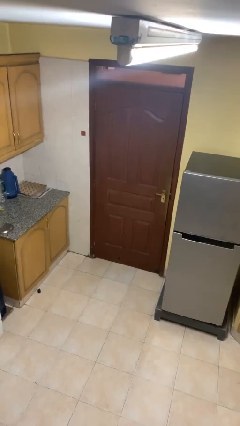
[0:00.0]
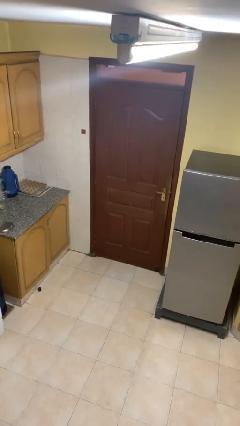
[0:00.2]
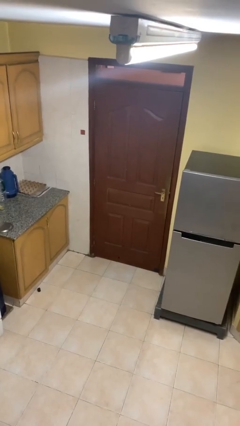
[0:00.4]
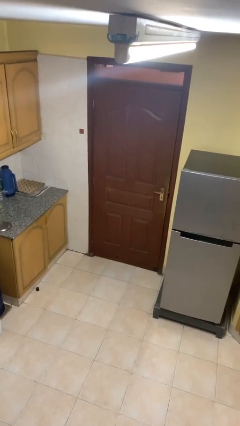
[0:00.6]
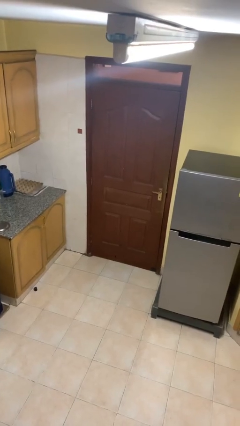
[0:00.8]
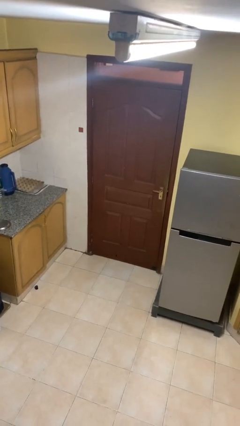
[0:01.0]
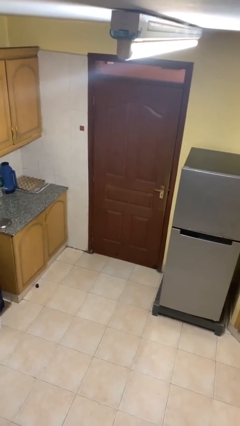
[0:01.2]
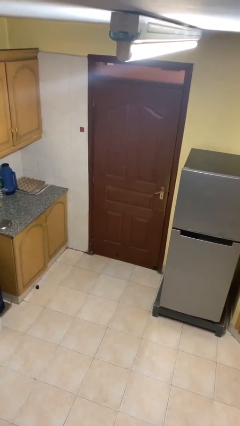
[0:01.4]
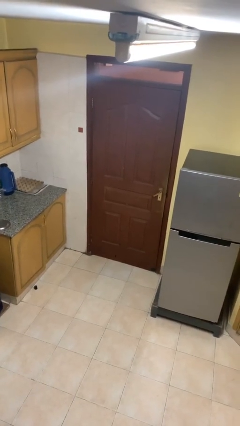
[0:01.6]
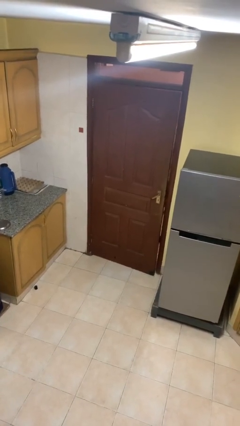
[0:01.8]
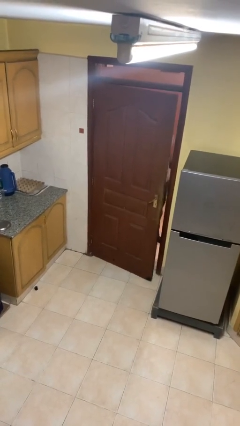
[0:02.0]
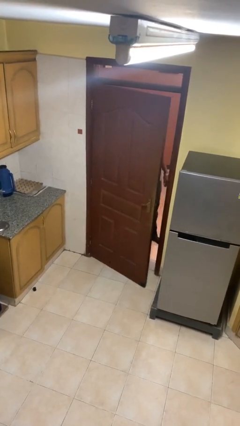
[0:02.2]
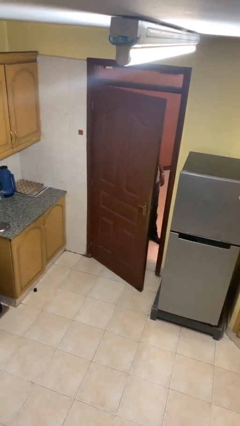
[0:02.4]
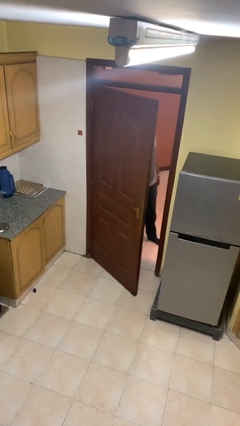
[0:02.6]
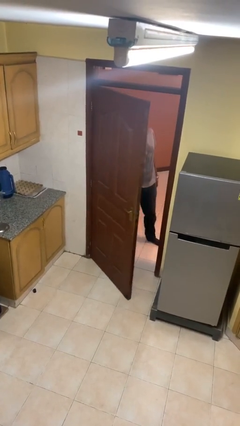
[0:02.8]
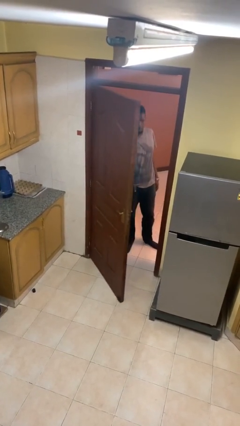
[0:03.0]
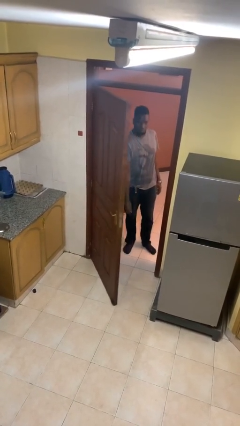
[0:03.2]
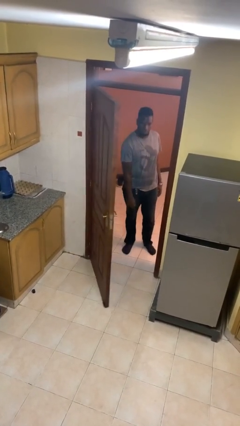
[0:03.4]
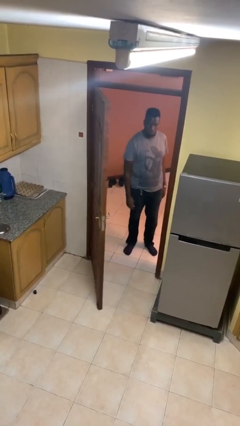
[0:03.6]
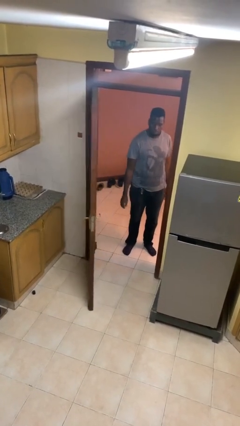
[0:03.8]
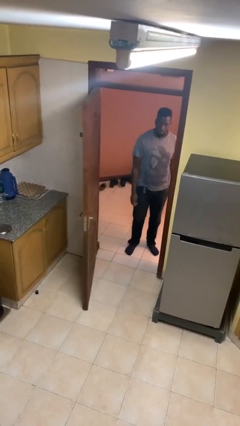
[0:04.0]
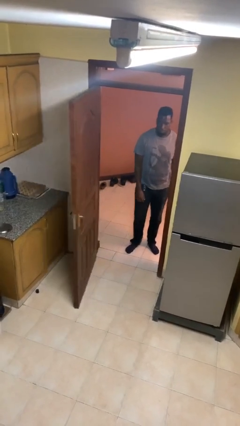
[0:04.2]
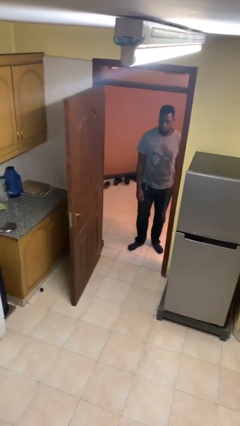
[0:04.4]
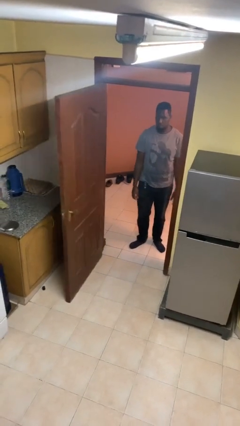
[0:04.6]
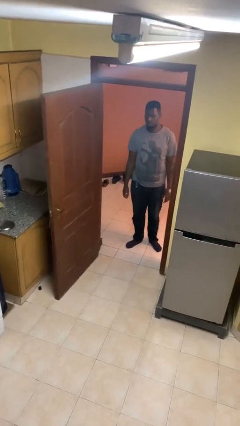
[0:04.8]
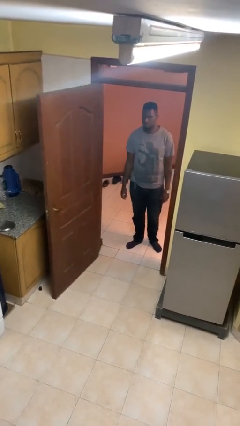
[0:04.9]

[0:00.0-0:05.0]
person opens facility door

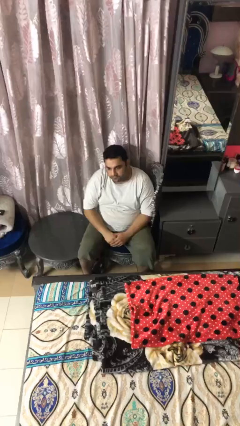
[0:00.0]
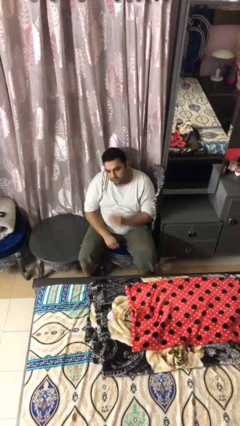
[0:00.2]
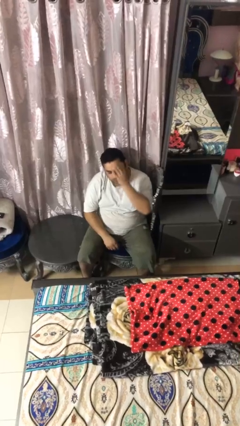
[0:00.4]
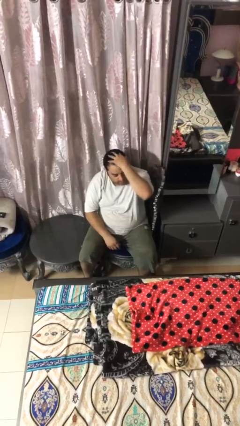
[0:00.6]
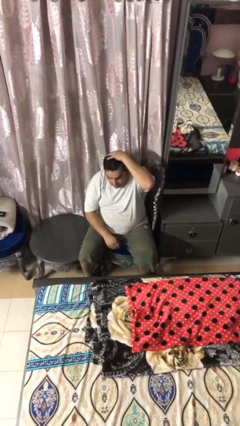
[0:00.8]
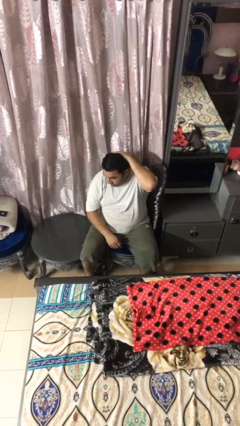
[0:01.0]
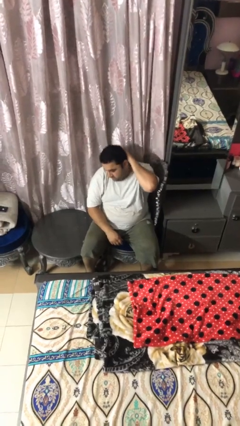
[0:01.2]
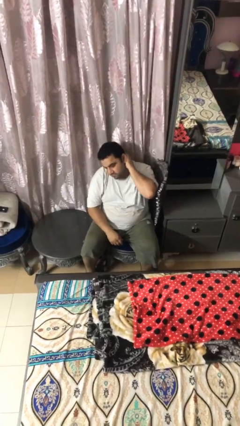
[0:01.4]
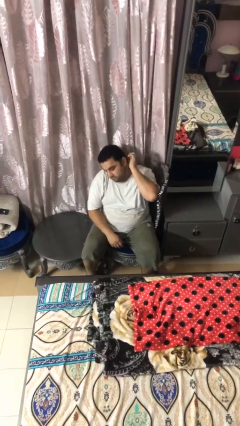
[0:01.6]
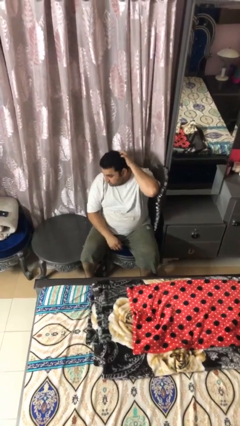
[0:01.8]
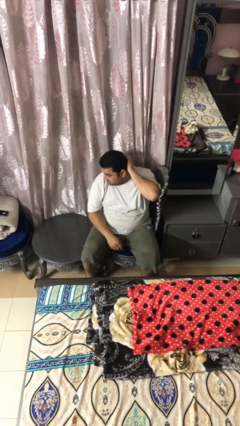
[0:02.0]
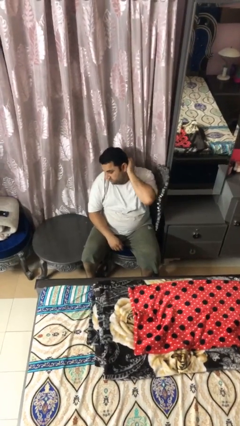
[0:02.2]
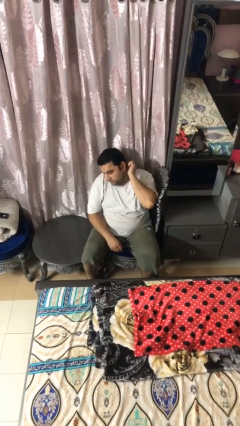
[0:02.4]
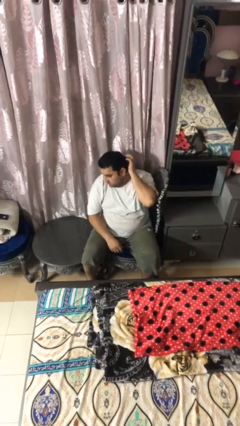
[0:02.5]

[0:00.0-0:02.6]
person strokes hair

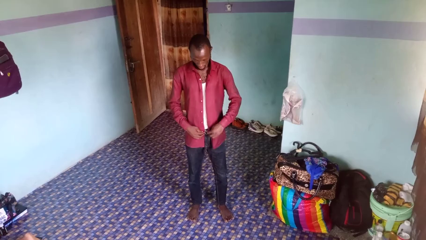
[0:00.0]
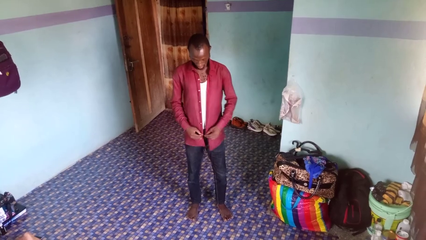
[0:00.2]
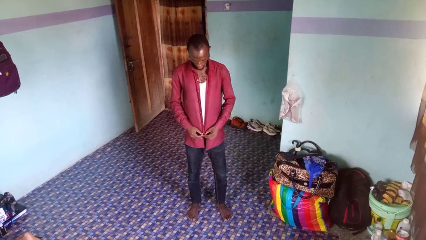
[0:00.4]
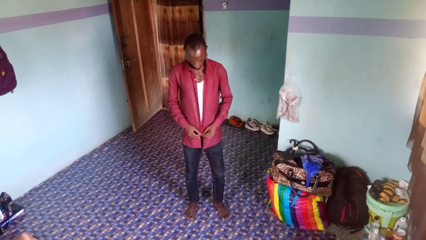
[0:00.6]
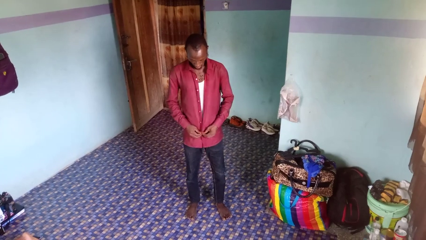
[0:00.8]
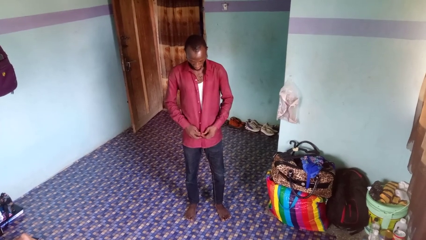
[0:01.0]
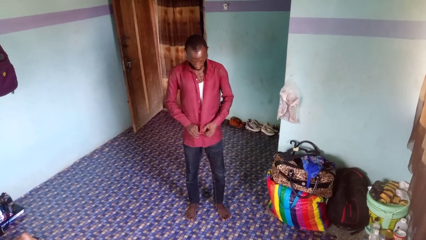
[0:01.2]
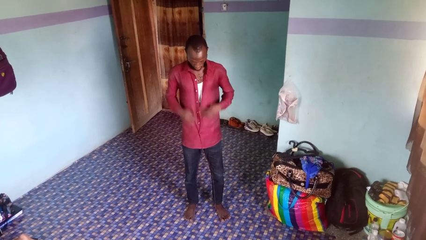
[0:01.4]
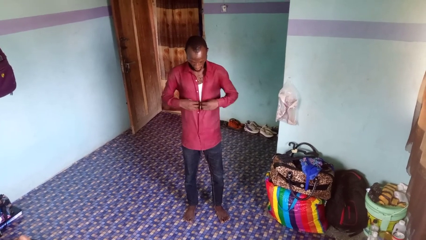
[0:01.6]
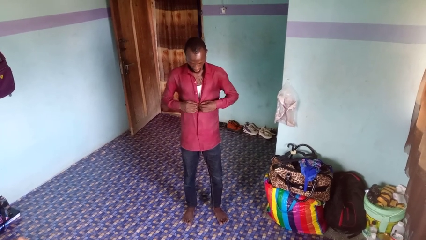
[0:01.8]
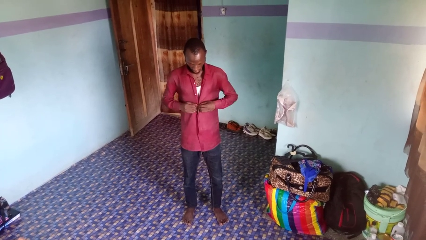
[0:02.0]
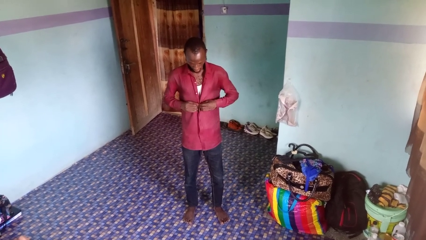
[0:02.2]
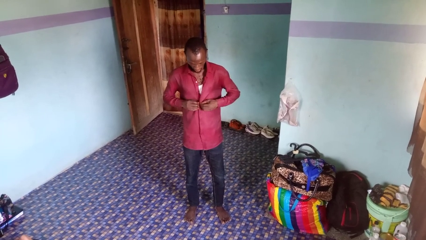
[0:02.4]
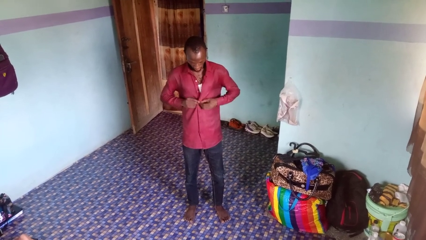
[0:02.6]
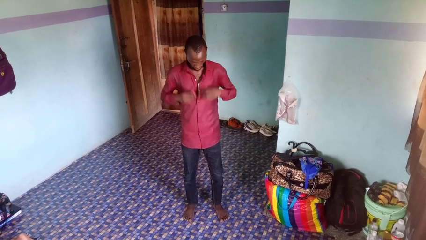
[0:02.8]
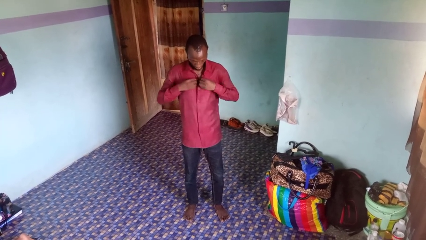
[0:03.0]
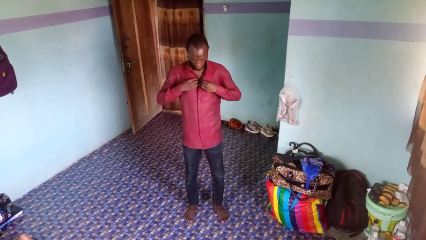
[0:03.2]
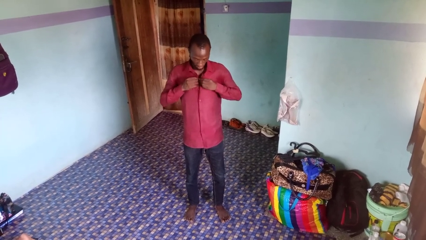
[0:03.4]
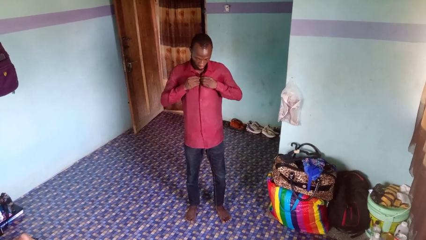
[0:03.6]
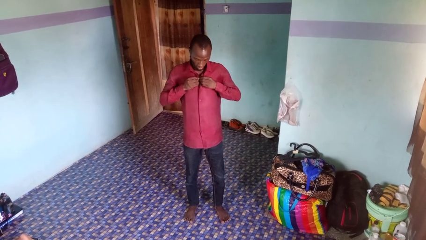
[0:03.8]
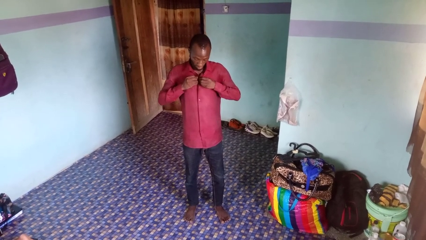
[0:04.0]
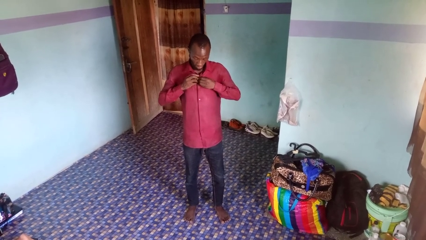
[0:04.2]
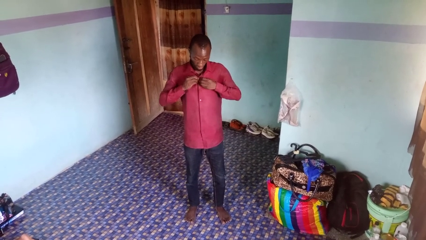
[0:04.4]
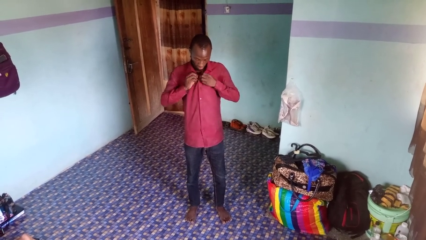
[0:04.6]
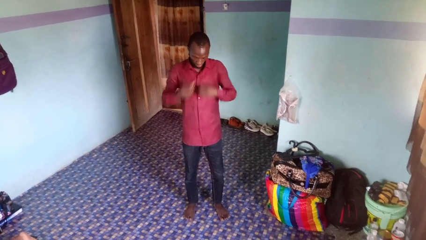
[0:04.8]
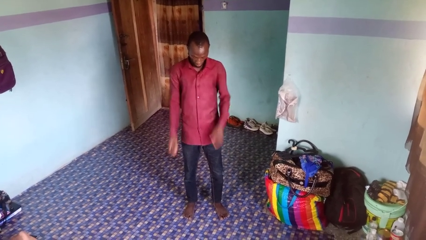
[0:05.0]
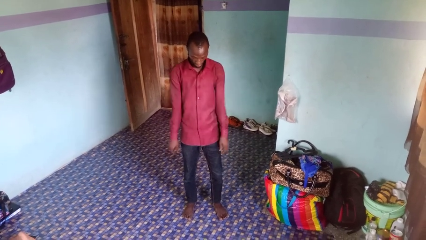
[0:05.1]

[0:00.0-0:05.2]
person buttons shirt

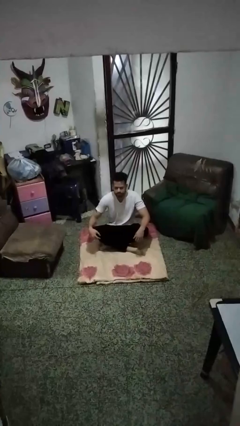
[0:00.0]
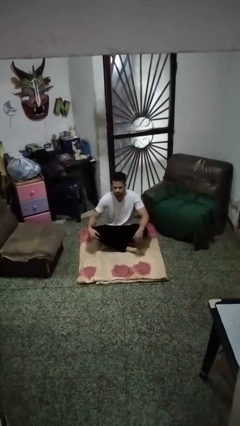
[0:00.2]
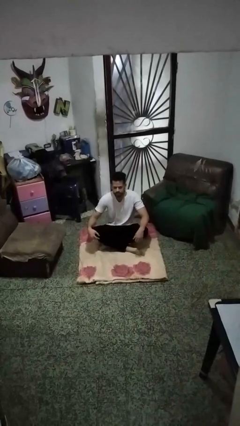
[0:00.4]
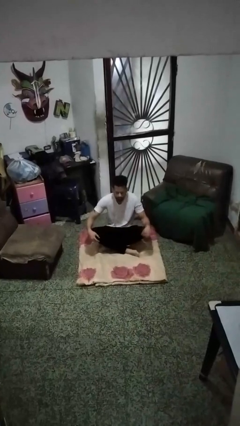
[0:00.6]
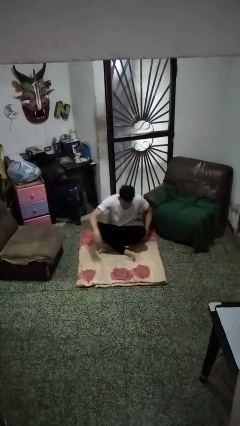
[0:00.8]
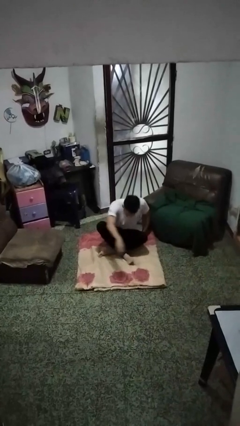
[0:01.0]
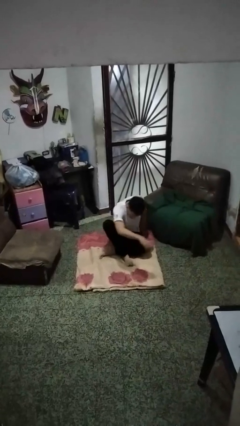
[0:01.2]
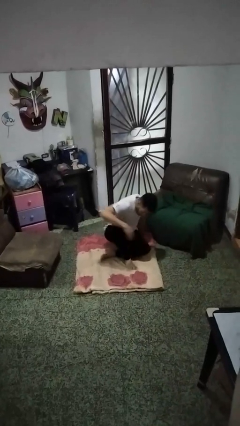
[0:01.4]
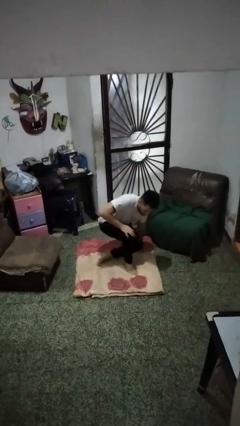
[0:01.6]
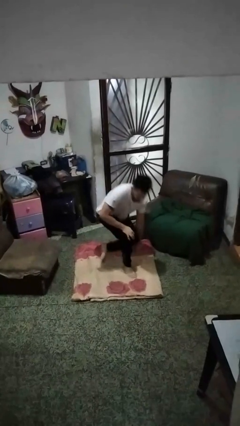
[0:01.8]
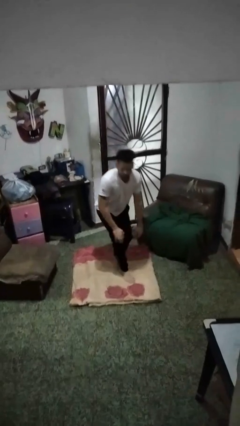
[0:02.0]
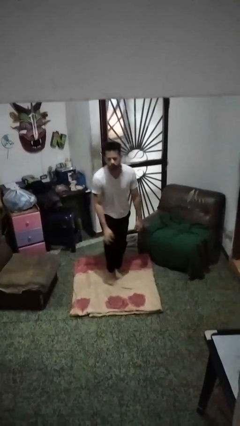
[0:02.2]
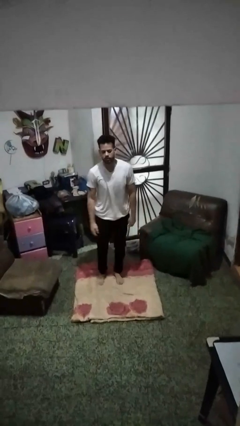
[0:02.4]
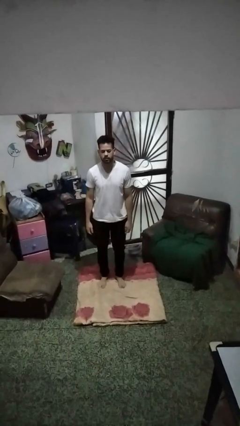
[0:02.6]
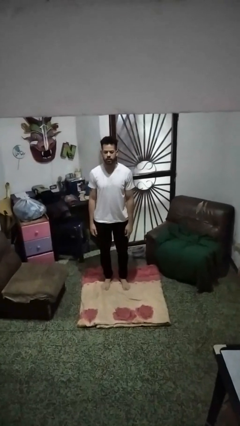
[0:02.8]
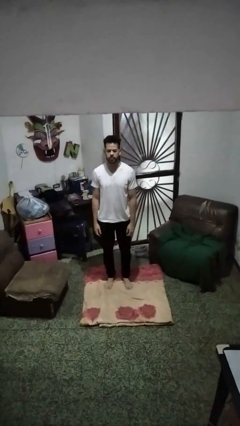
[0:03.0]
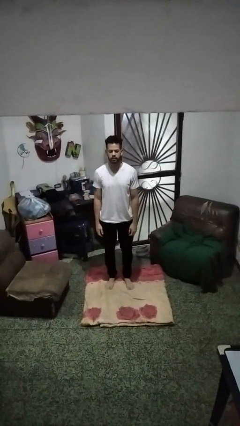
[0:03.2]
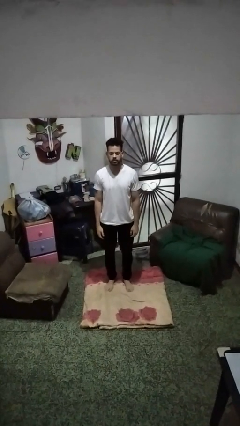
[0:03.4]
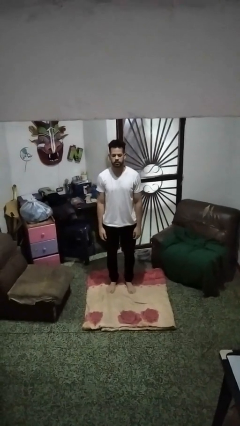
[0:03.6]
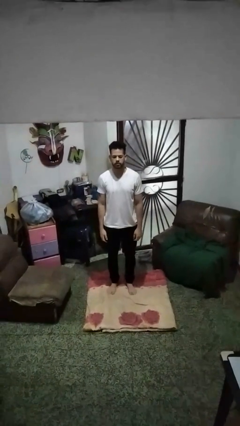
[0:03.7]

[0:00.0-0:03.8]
person stands up from floor

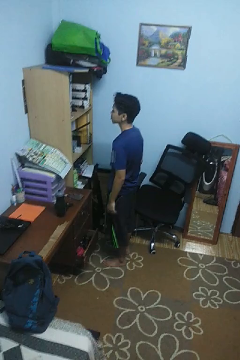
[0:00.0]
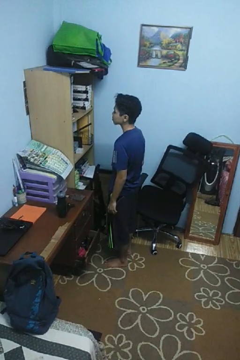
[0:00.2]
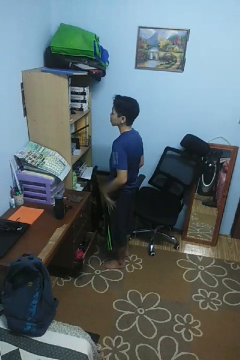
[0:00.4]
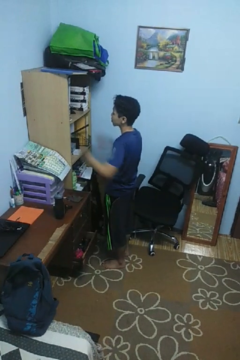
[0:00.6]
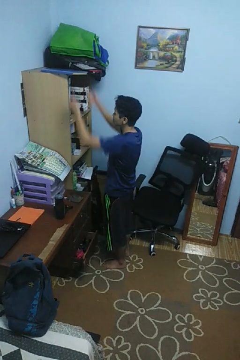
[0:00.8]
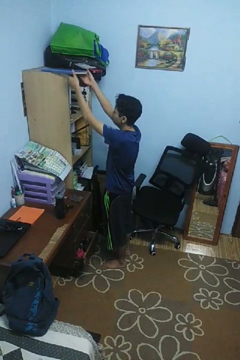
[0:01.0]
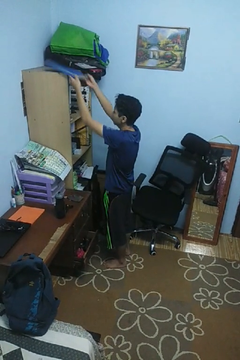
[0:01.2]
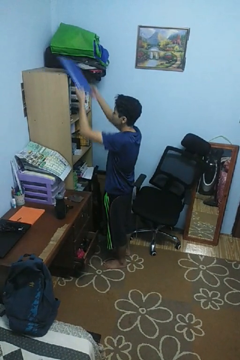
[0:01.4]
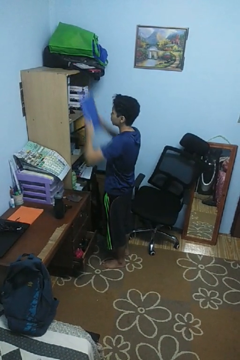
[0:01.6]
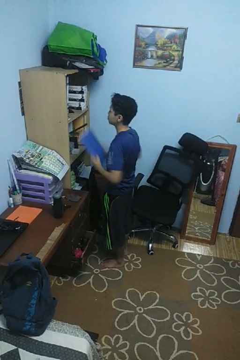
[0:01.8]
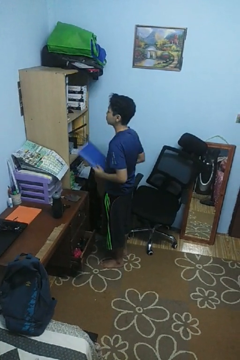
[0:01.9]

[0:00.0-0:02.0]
person picks up object from shelf
